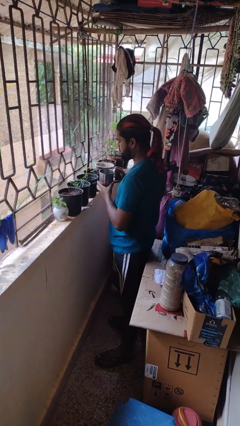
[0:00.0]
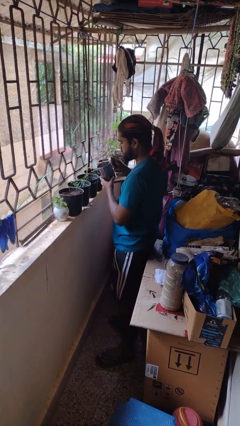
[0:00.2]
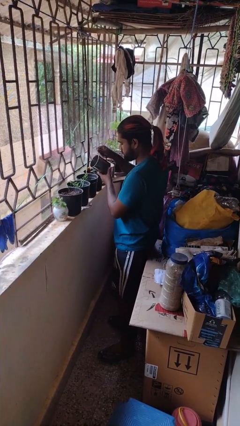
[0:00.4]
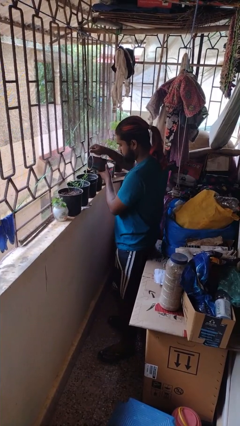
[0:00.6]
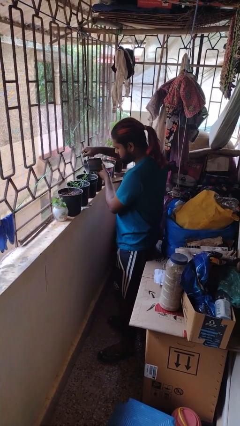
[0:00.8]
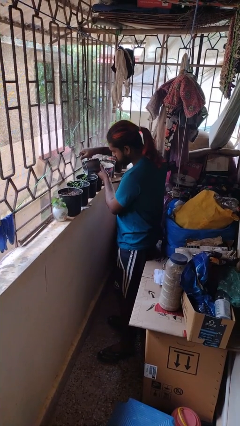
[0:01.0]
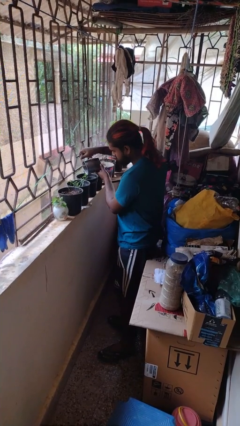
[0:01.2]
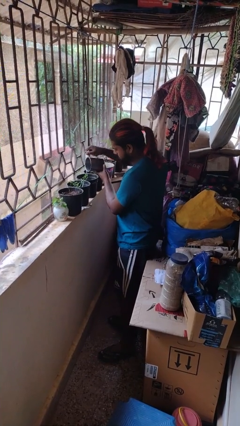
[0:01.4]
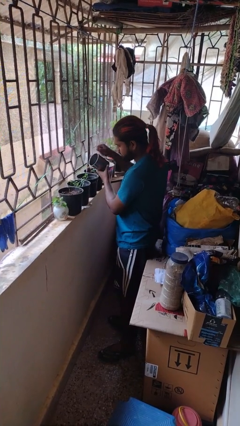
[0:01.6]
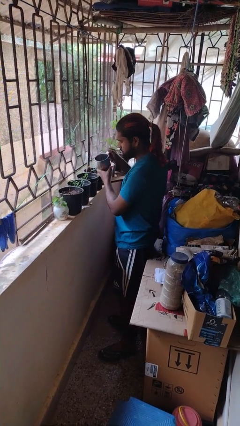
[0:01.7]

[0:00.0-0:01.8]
person waters houseplant

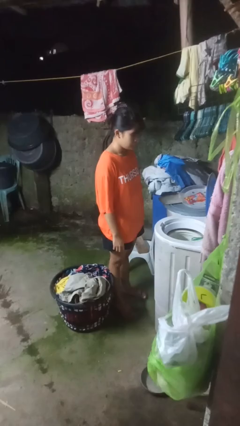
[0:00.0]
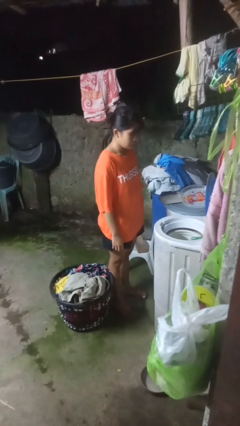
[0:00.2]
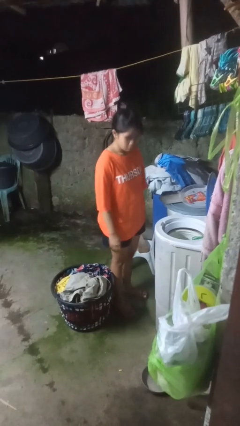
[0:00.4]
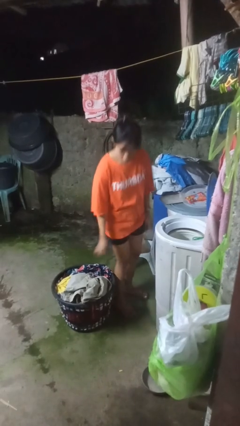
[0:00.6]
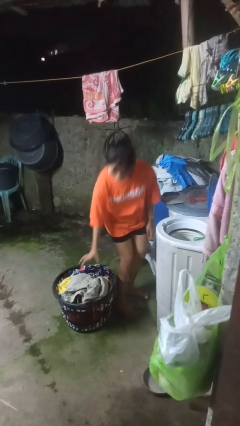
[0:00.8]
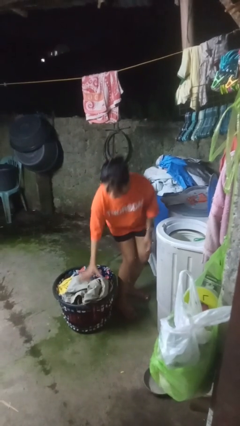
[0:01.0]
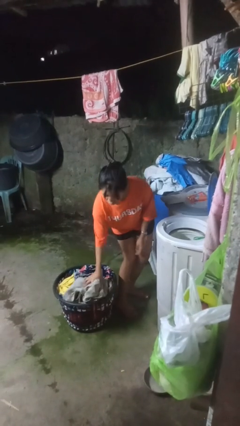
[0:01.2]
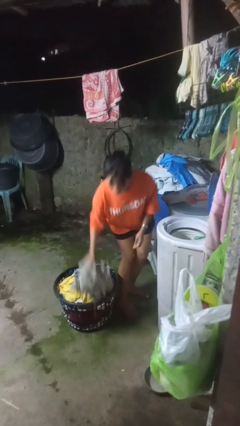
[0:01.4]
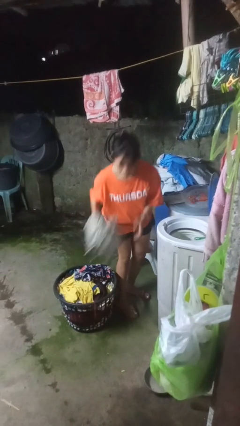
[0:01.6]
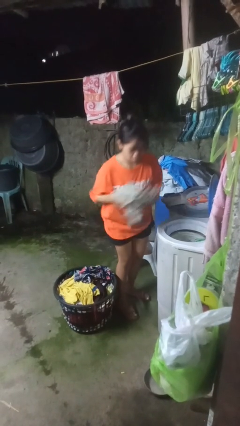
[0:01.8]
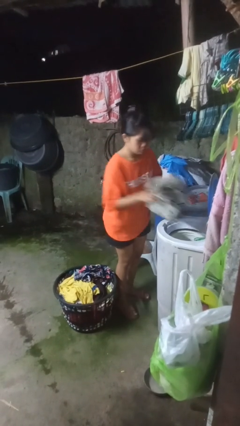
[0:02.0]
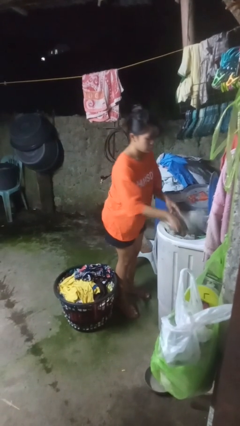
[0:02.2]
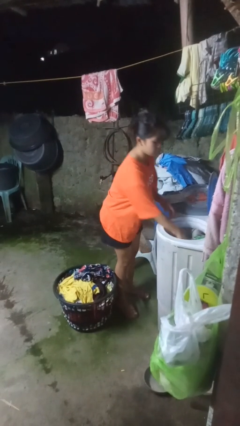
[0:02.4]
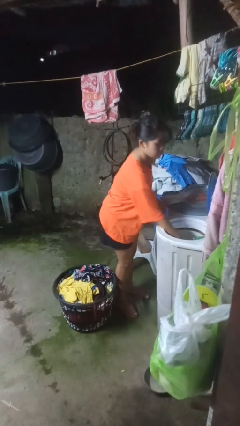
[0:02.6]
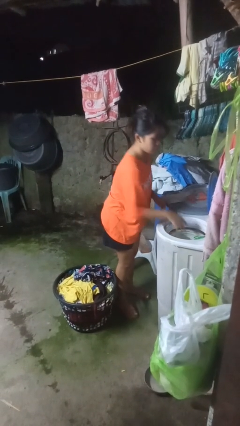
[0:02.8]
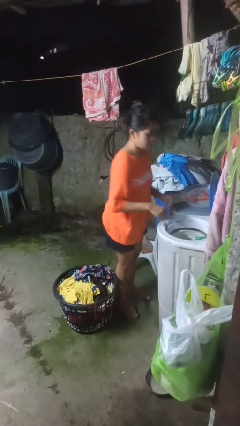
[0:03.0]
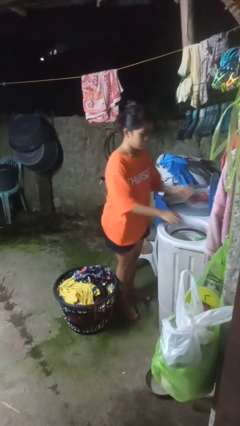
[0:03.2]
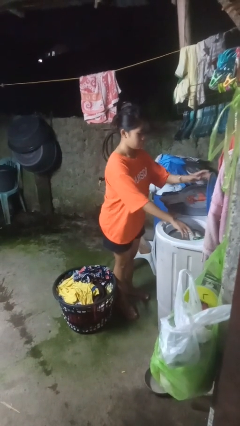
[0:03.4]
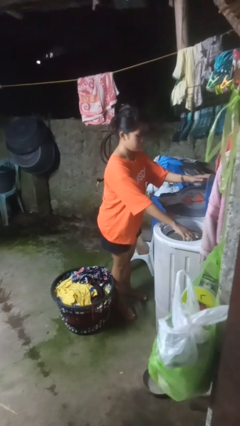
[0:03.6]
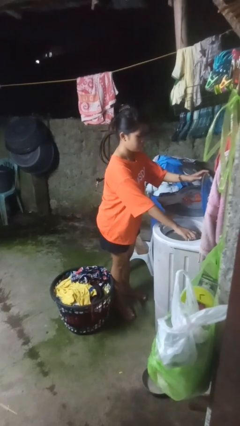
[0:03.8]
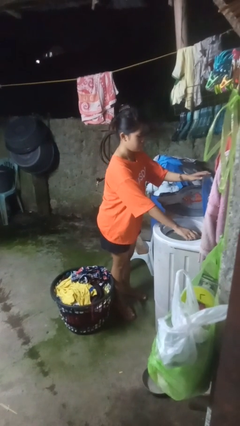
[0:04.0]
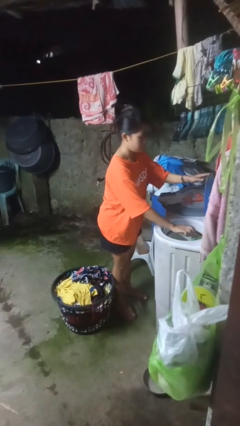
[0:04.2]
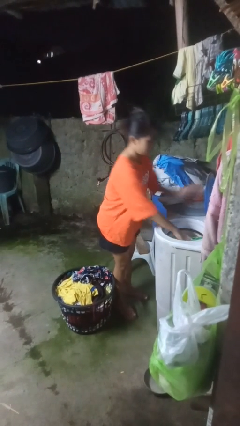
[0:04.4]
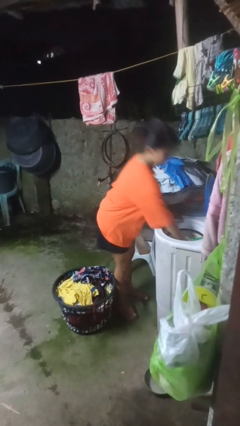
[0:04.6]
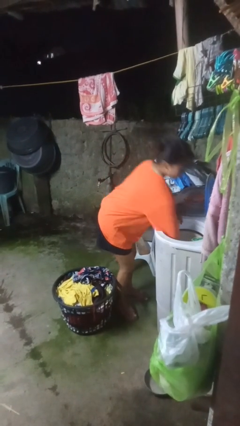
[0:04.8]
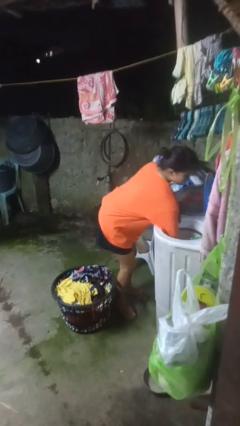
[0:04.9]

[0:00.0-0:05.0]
person loads dryer

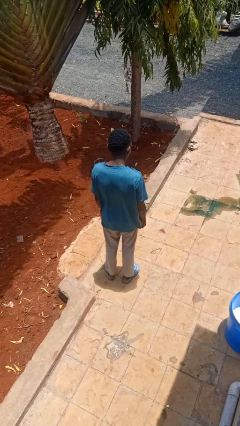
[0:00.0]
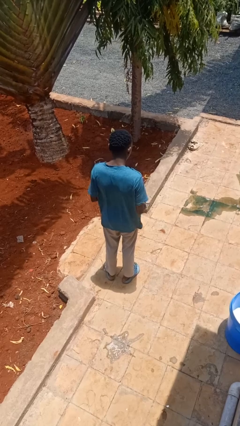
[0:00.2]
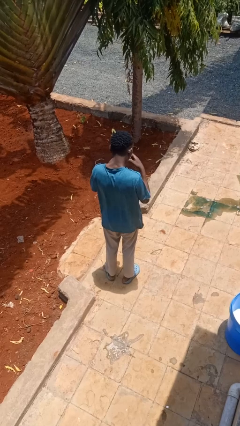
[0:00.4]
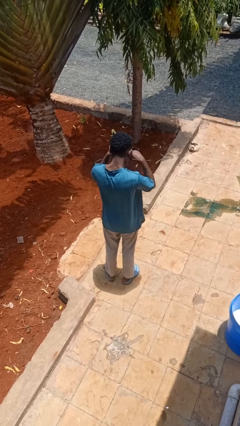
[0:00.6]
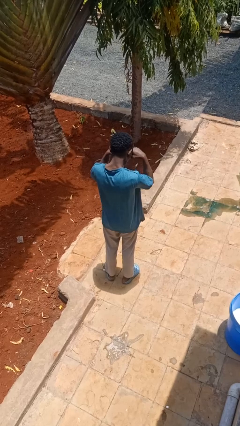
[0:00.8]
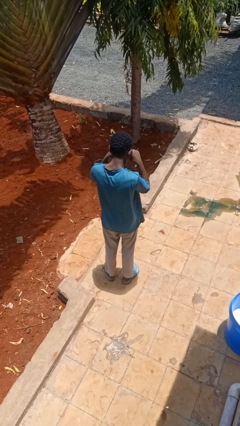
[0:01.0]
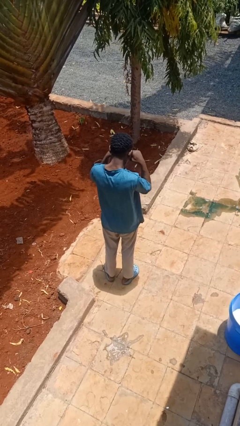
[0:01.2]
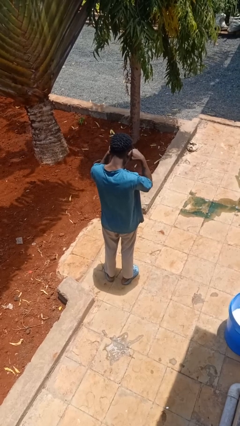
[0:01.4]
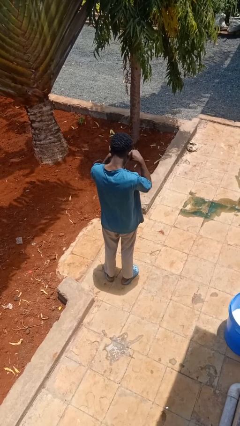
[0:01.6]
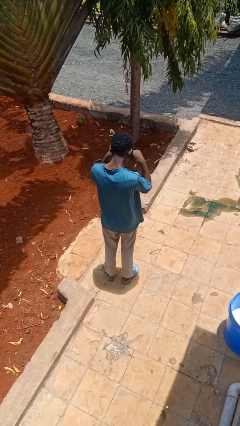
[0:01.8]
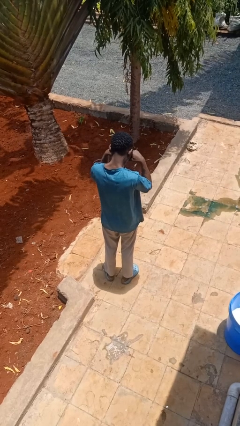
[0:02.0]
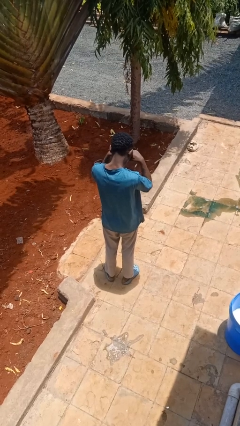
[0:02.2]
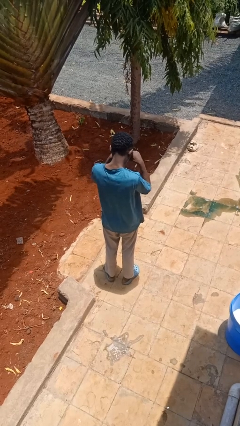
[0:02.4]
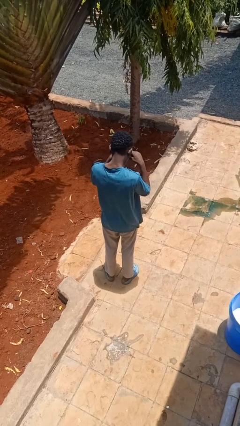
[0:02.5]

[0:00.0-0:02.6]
person rubs eyes

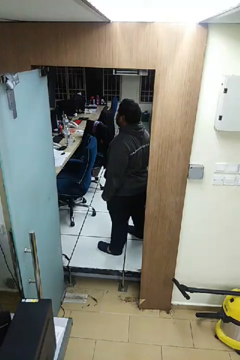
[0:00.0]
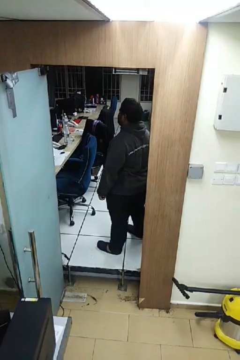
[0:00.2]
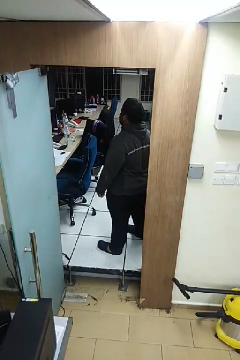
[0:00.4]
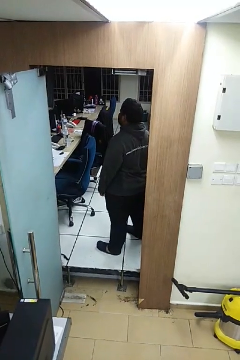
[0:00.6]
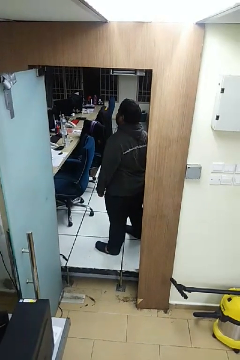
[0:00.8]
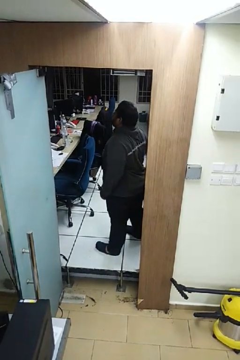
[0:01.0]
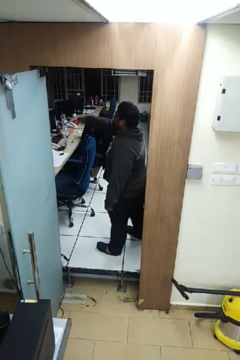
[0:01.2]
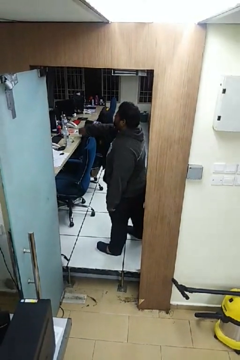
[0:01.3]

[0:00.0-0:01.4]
person punches

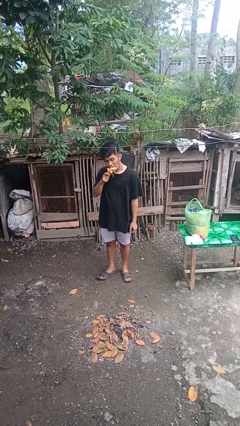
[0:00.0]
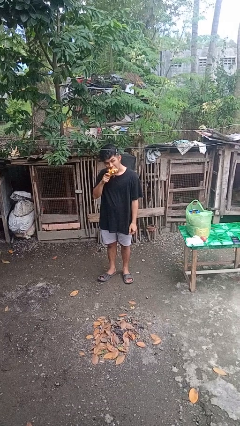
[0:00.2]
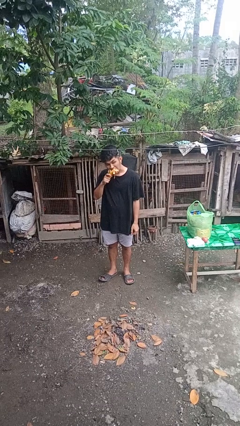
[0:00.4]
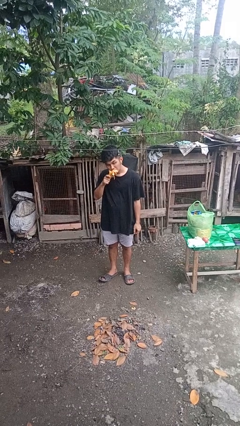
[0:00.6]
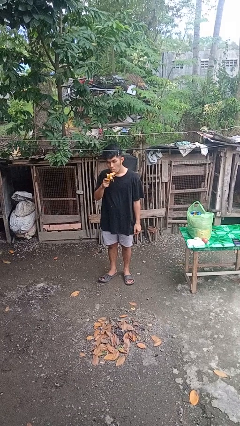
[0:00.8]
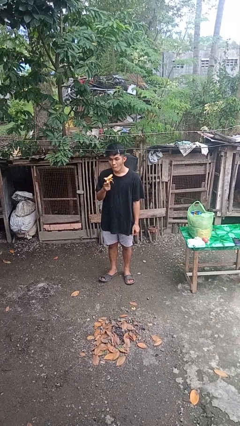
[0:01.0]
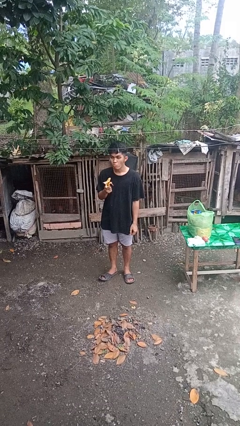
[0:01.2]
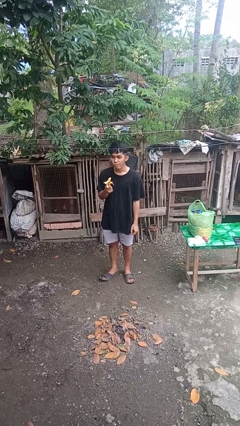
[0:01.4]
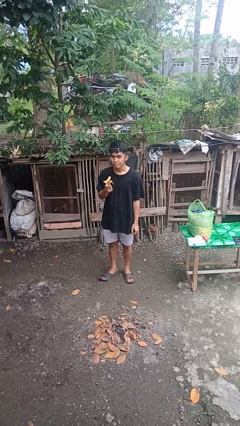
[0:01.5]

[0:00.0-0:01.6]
person eats banana

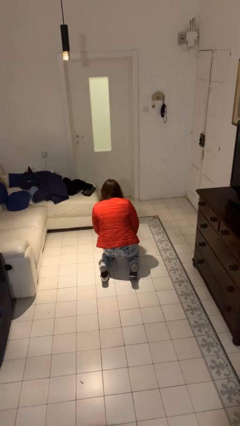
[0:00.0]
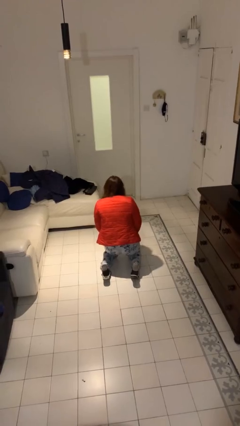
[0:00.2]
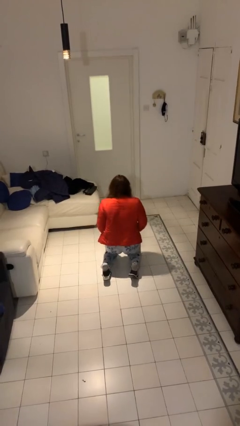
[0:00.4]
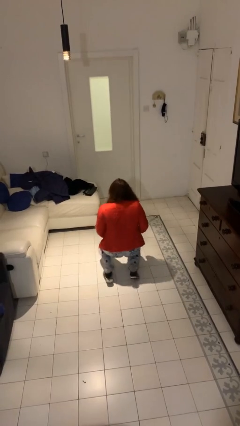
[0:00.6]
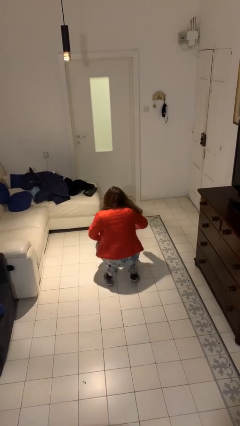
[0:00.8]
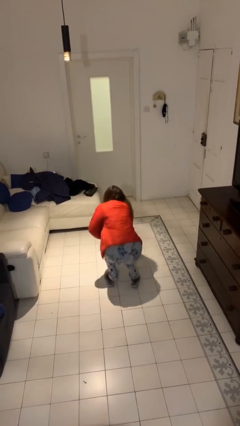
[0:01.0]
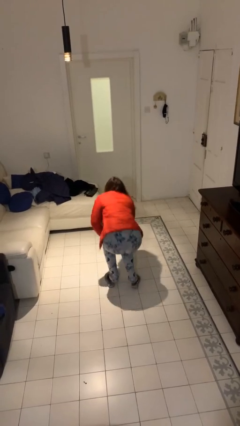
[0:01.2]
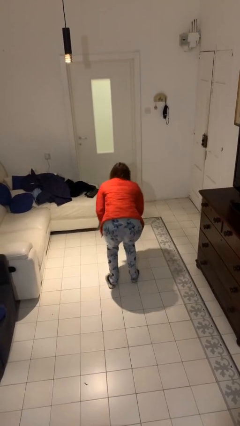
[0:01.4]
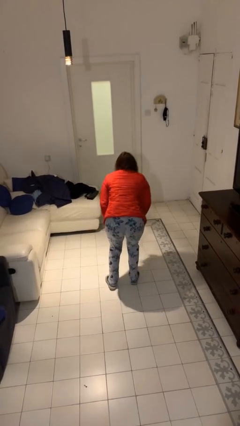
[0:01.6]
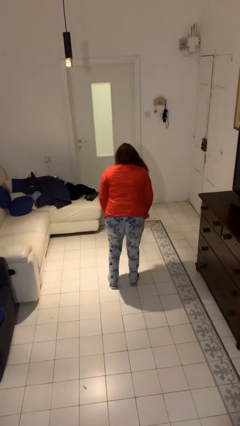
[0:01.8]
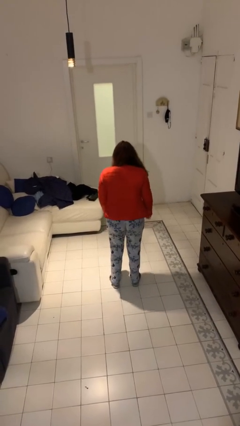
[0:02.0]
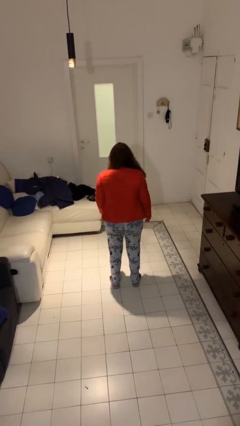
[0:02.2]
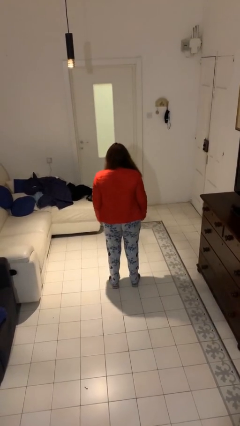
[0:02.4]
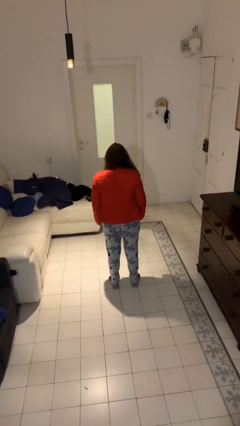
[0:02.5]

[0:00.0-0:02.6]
person stands up from floor

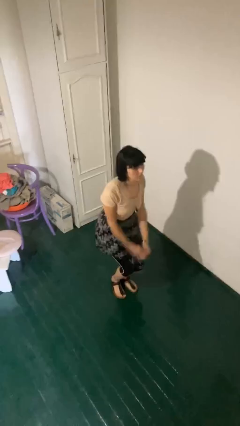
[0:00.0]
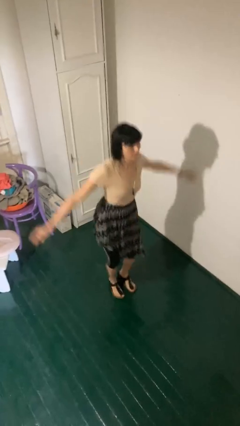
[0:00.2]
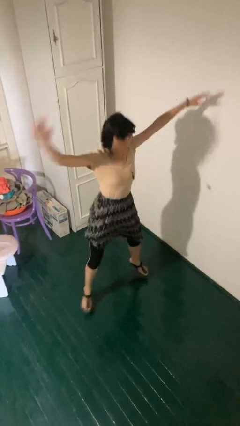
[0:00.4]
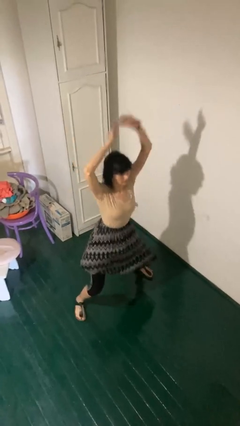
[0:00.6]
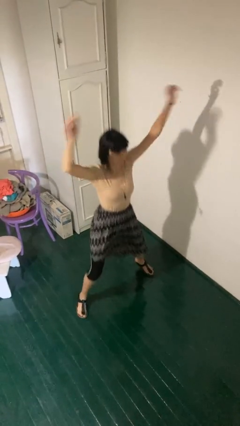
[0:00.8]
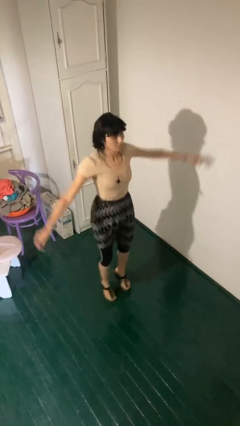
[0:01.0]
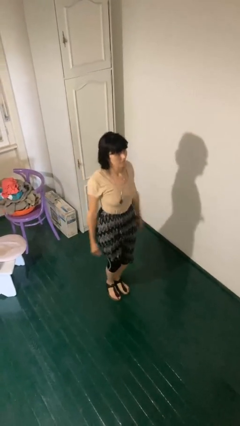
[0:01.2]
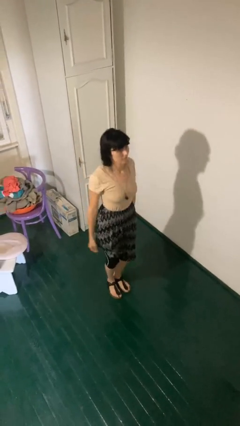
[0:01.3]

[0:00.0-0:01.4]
person exercises with jumping jacks

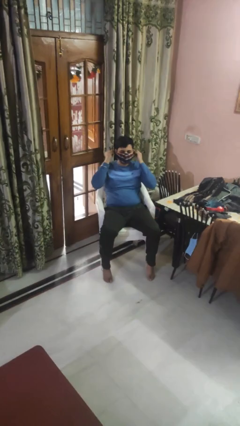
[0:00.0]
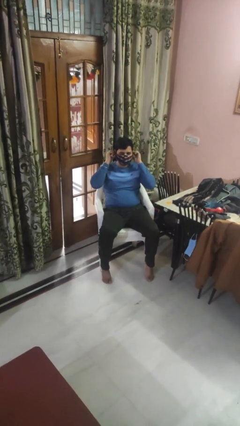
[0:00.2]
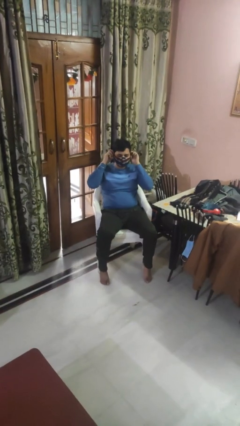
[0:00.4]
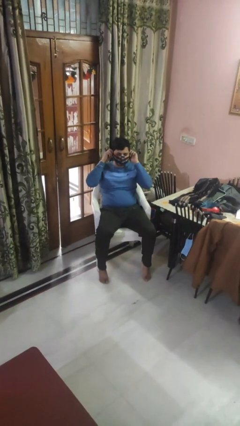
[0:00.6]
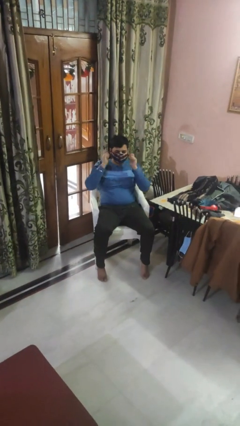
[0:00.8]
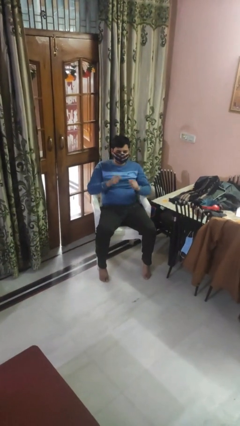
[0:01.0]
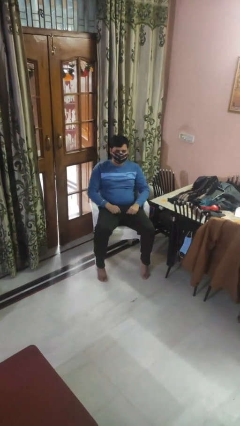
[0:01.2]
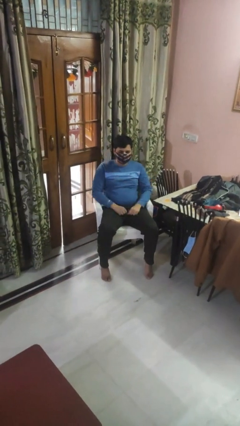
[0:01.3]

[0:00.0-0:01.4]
person puts on facemask
